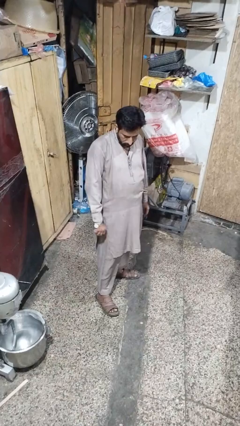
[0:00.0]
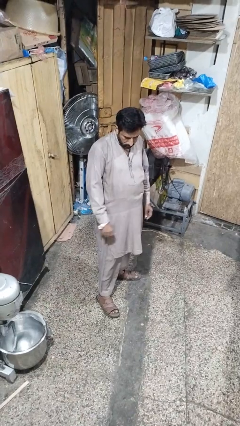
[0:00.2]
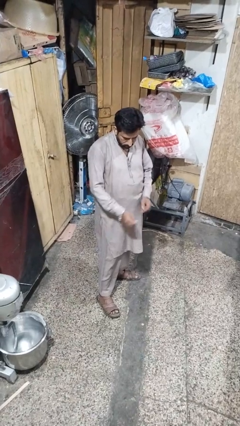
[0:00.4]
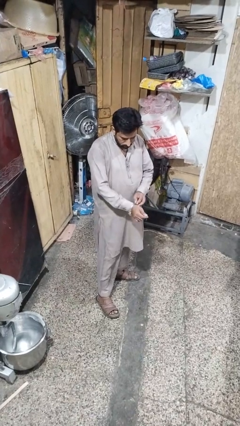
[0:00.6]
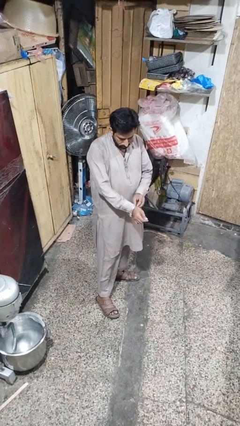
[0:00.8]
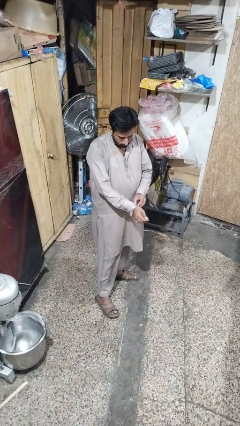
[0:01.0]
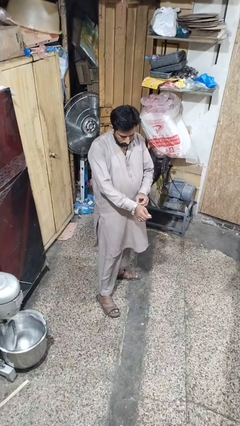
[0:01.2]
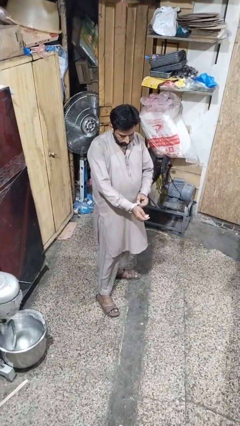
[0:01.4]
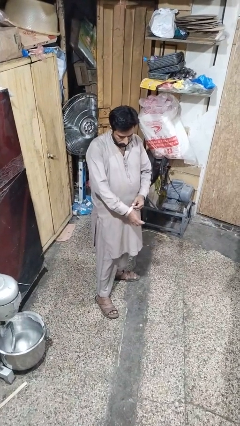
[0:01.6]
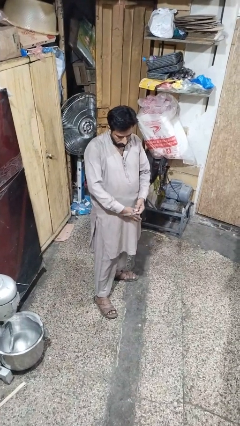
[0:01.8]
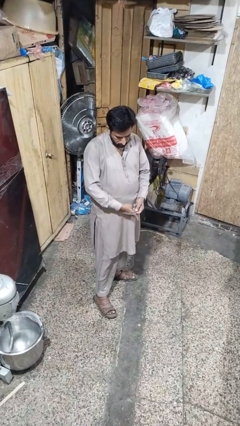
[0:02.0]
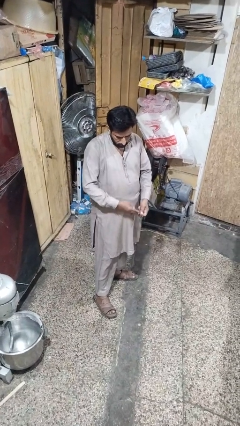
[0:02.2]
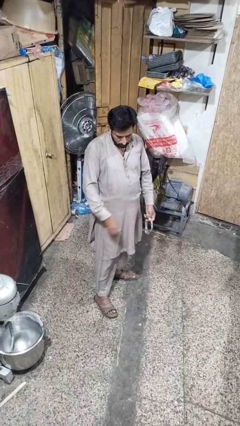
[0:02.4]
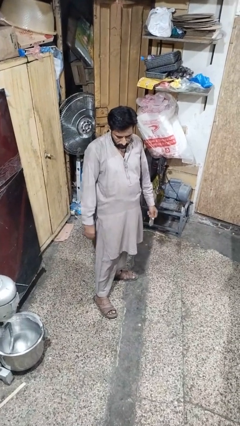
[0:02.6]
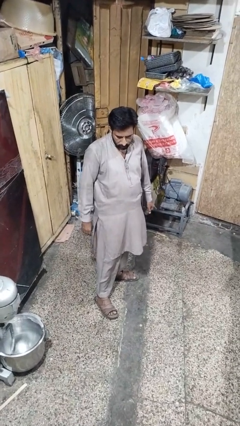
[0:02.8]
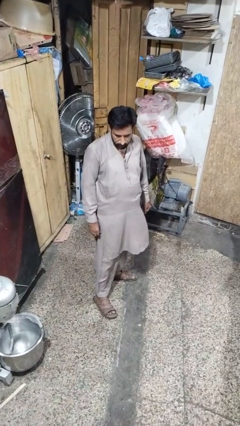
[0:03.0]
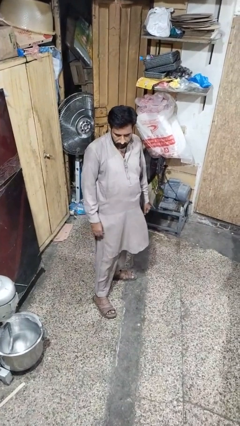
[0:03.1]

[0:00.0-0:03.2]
person takes off wristwatch

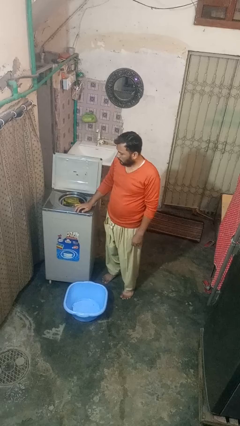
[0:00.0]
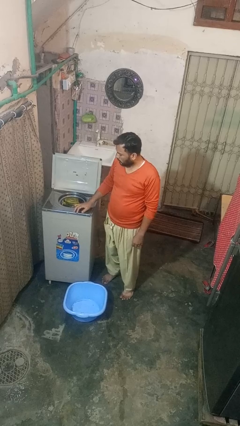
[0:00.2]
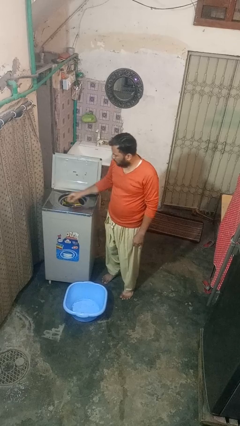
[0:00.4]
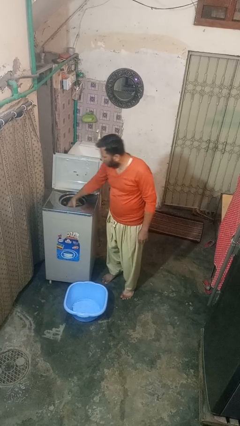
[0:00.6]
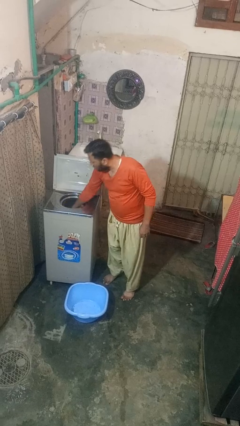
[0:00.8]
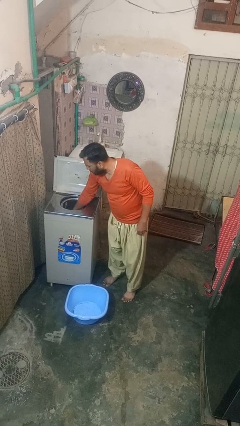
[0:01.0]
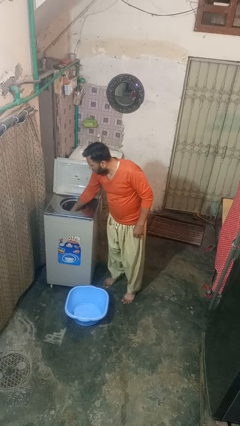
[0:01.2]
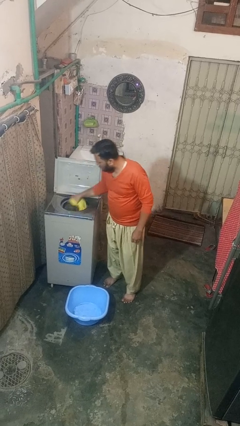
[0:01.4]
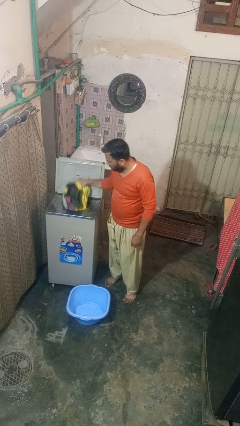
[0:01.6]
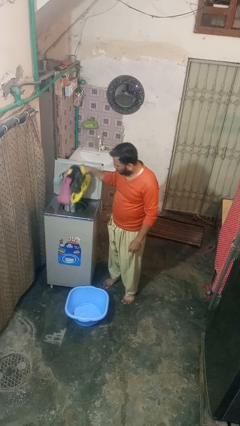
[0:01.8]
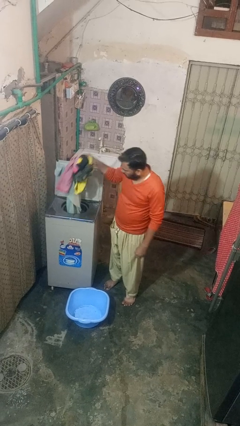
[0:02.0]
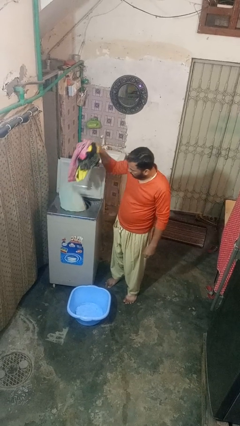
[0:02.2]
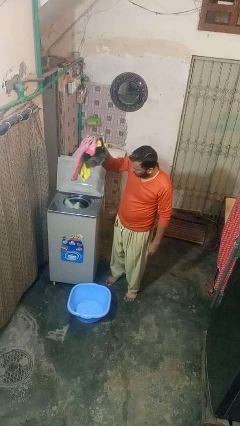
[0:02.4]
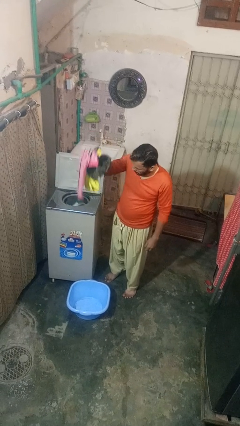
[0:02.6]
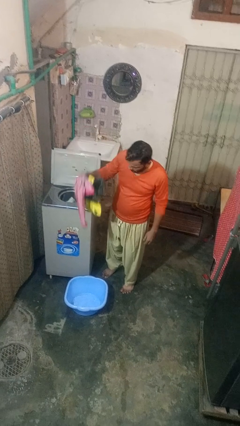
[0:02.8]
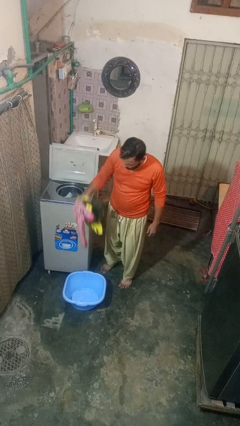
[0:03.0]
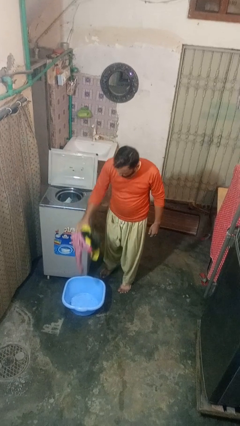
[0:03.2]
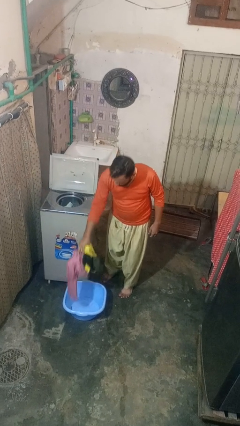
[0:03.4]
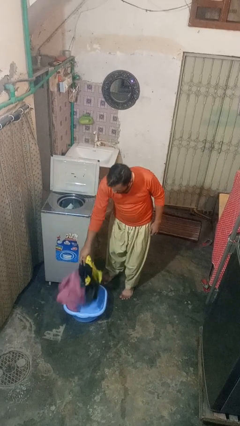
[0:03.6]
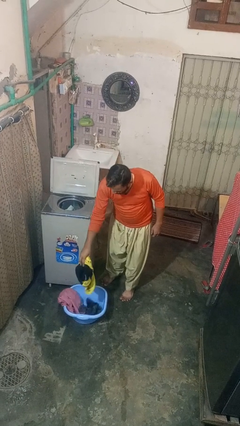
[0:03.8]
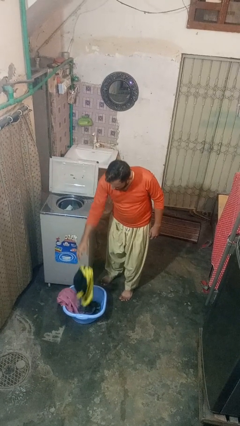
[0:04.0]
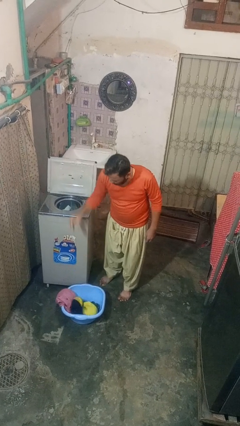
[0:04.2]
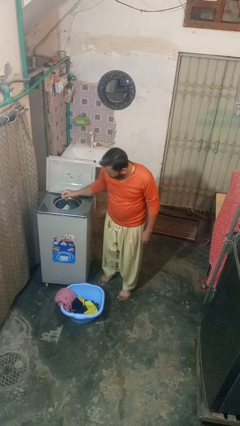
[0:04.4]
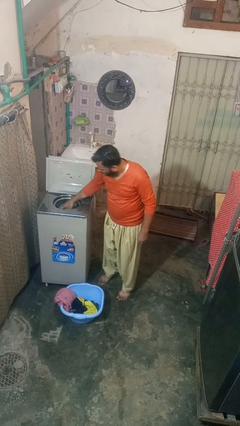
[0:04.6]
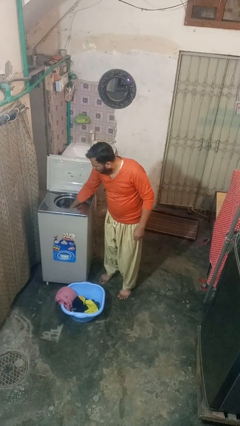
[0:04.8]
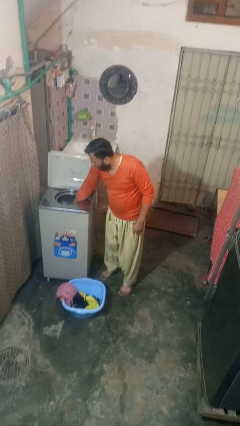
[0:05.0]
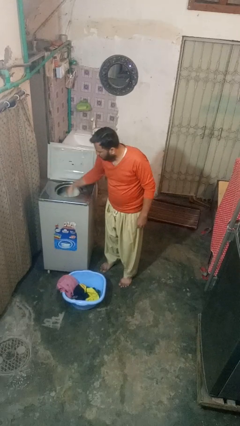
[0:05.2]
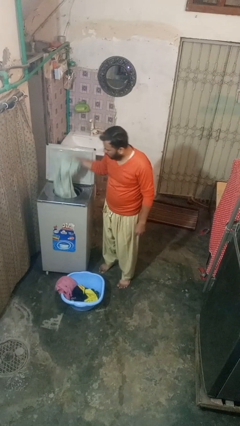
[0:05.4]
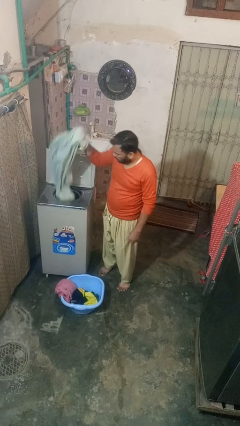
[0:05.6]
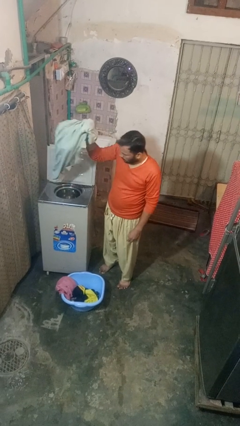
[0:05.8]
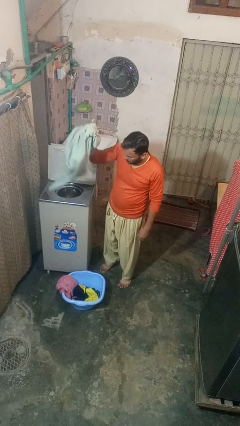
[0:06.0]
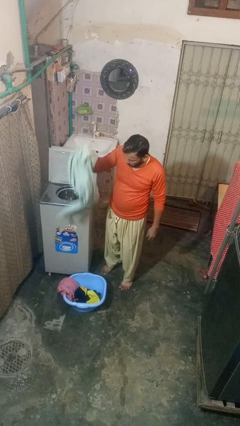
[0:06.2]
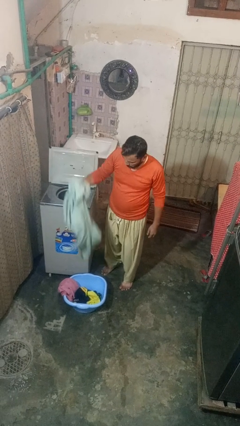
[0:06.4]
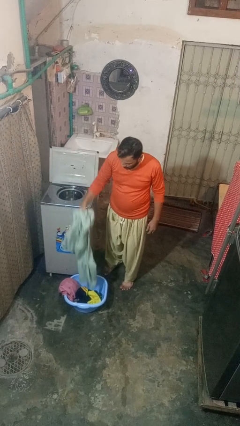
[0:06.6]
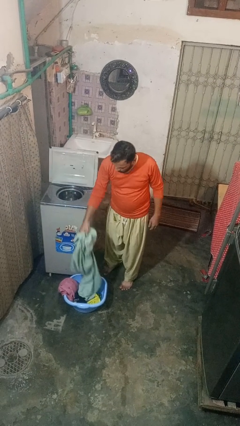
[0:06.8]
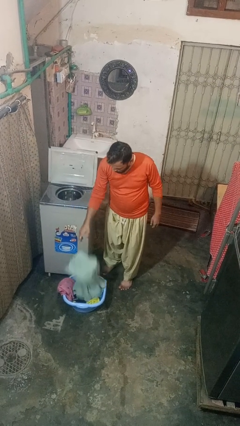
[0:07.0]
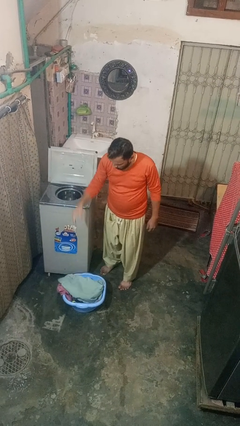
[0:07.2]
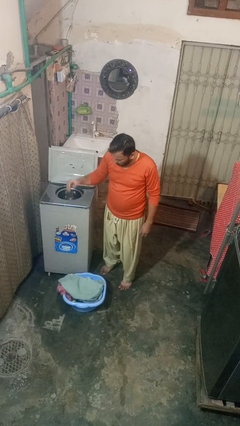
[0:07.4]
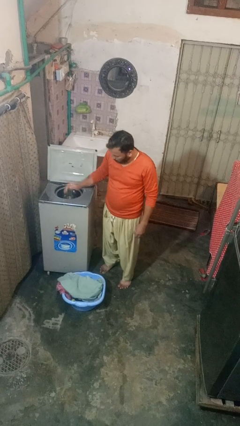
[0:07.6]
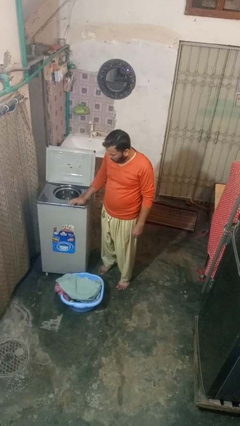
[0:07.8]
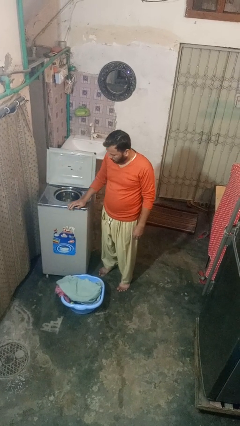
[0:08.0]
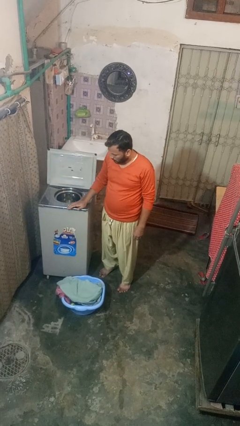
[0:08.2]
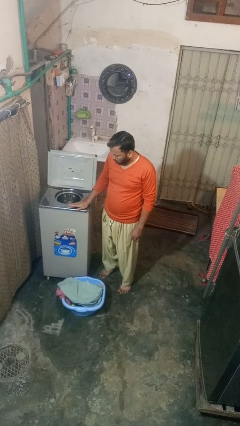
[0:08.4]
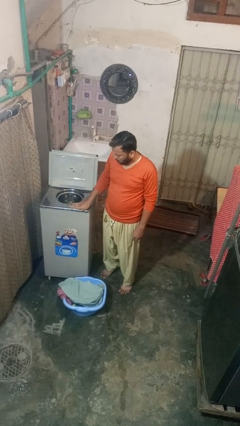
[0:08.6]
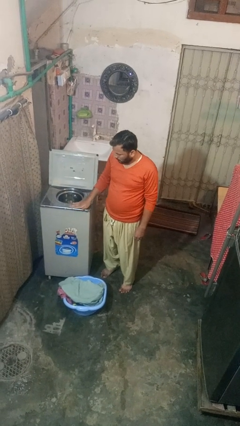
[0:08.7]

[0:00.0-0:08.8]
person unloads dryer

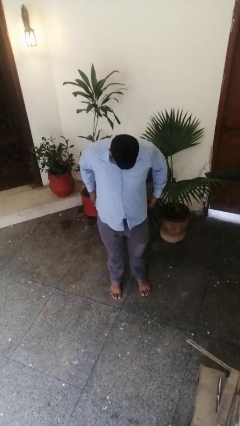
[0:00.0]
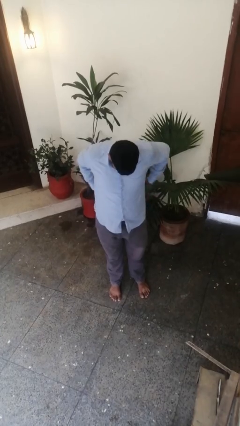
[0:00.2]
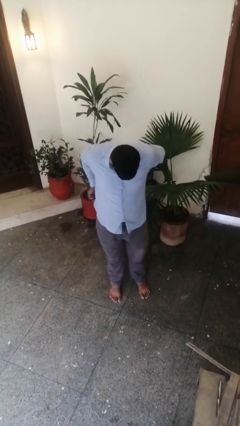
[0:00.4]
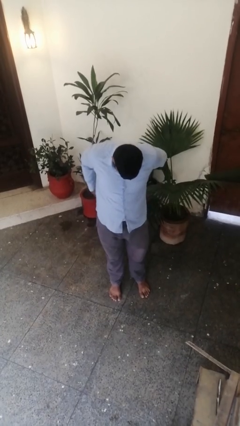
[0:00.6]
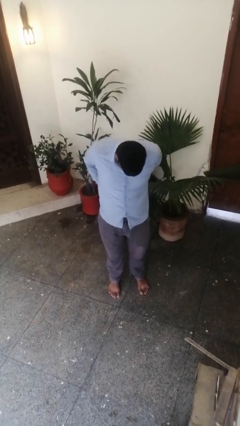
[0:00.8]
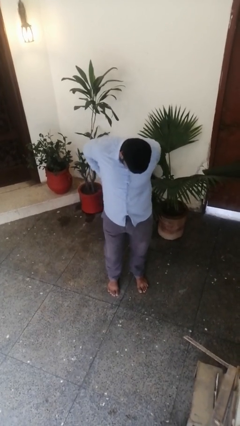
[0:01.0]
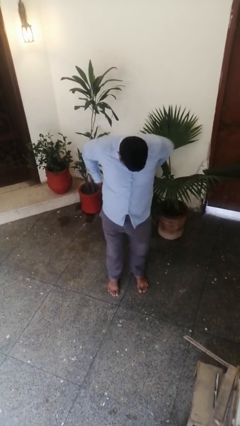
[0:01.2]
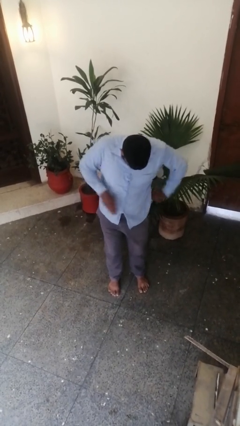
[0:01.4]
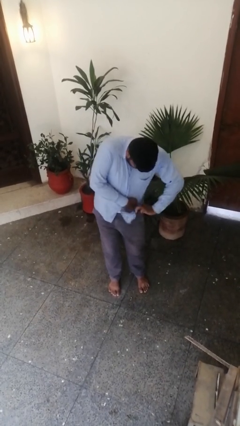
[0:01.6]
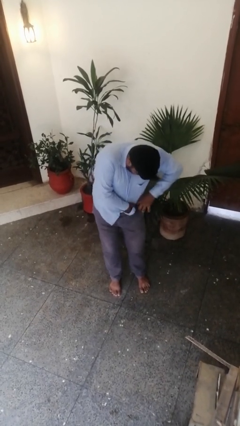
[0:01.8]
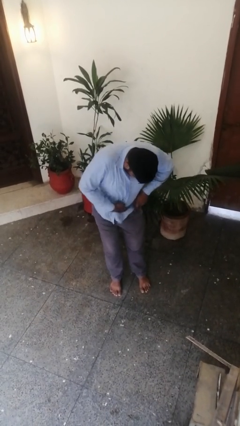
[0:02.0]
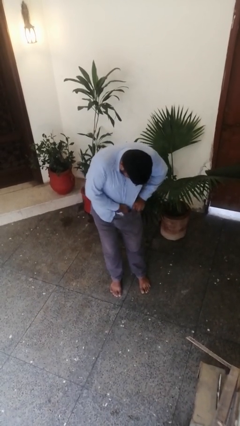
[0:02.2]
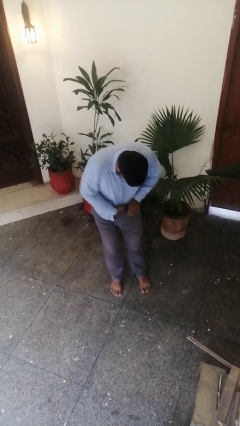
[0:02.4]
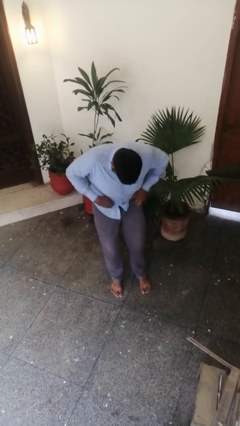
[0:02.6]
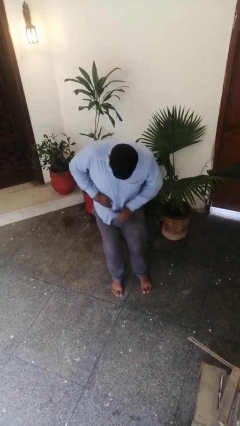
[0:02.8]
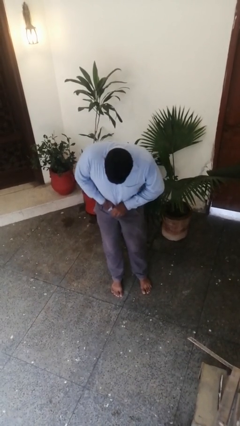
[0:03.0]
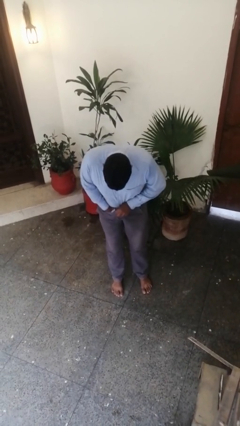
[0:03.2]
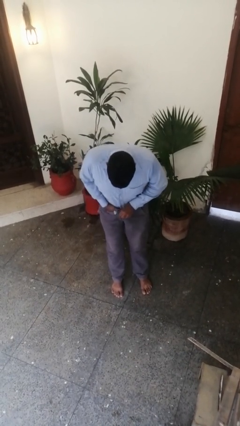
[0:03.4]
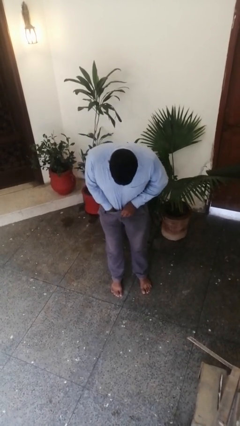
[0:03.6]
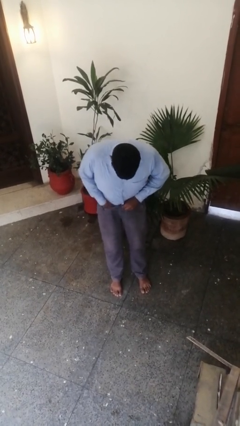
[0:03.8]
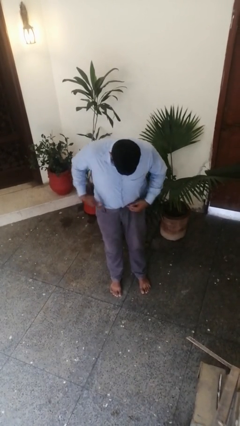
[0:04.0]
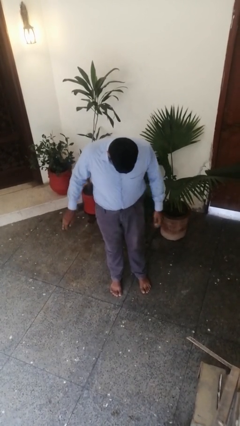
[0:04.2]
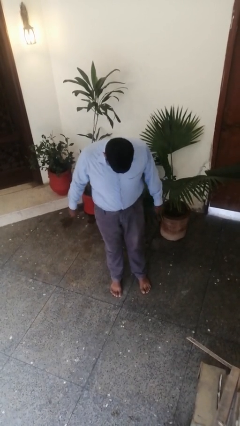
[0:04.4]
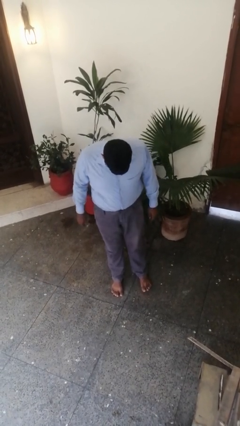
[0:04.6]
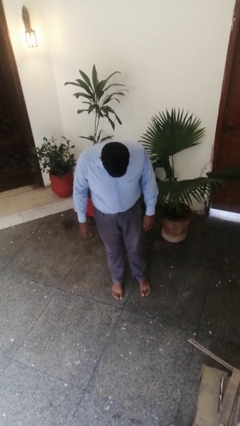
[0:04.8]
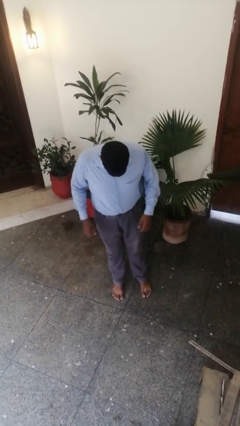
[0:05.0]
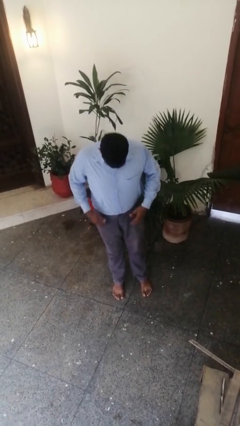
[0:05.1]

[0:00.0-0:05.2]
person tucks in shirt

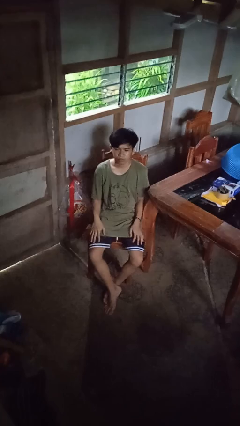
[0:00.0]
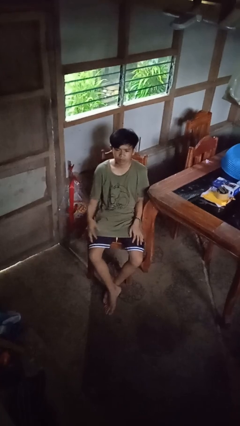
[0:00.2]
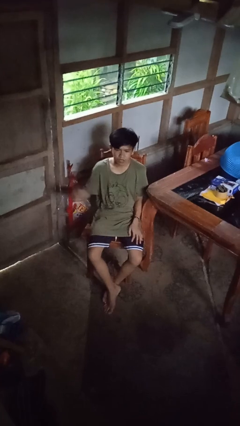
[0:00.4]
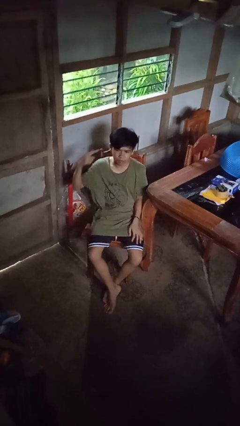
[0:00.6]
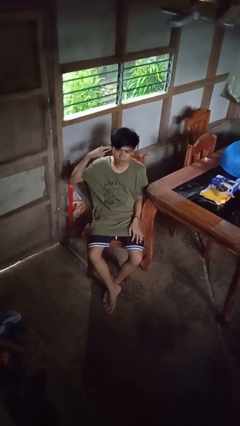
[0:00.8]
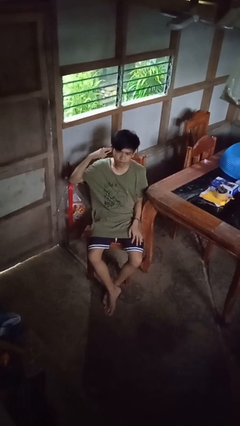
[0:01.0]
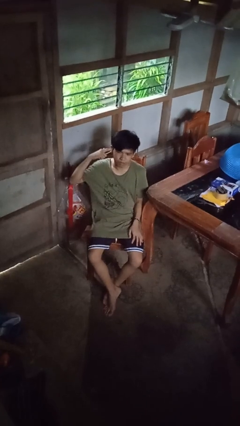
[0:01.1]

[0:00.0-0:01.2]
person gestures listen closely
